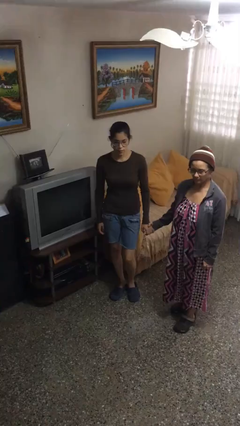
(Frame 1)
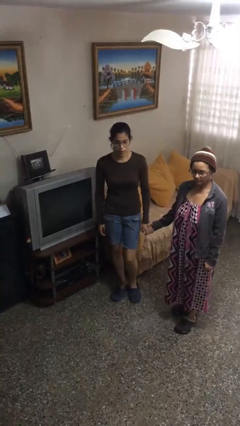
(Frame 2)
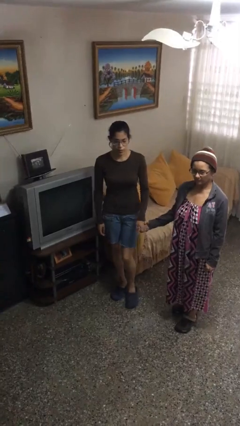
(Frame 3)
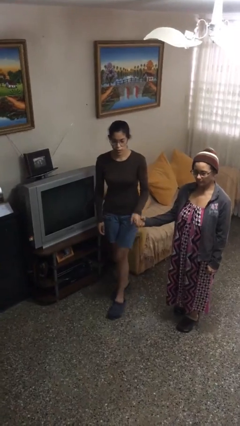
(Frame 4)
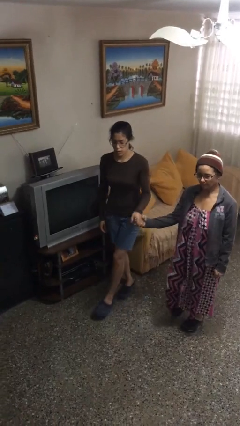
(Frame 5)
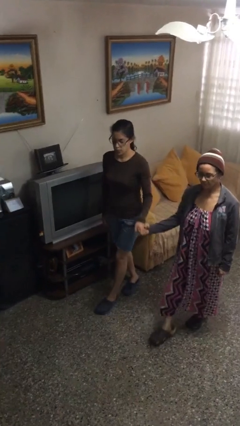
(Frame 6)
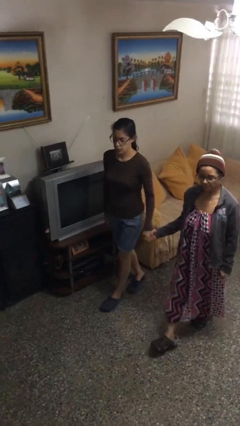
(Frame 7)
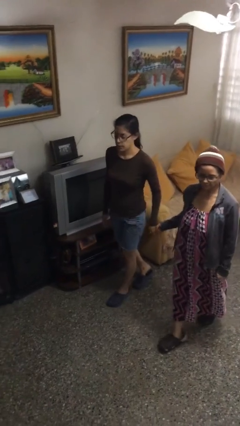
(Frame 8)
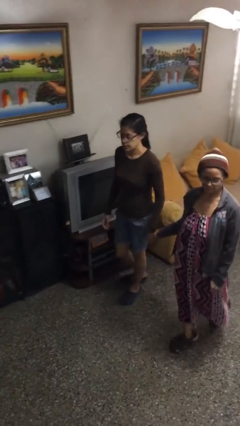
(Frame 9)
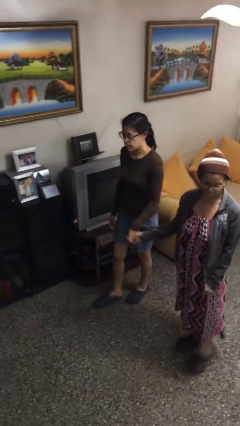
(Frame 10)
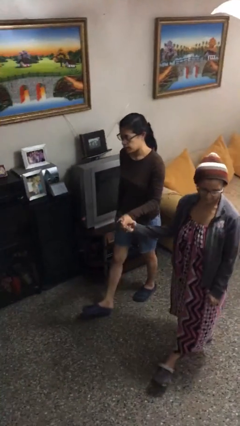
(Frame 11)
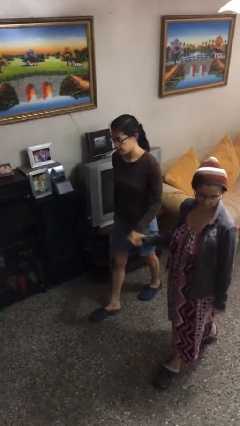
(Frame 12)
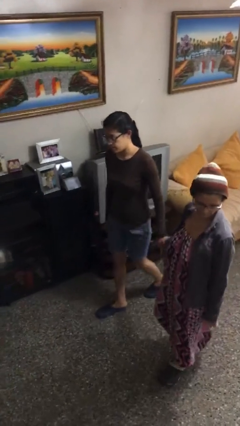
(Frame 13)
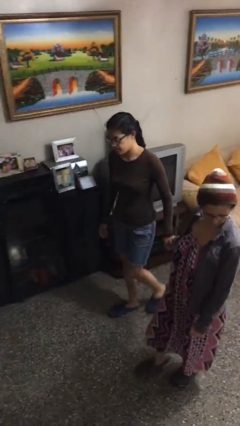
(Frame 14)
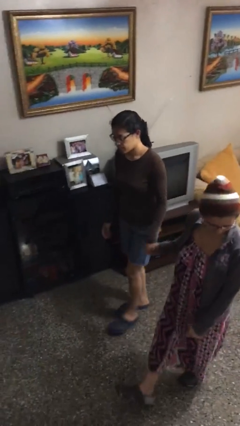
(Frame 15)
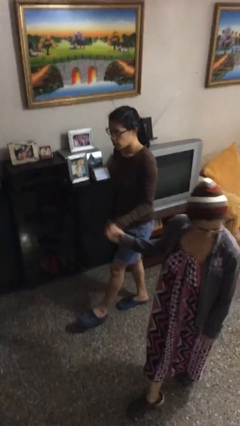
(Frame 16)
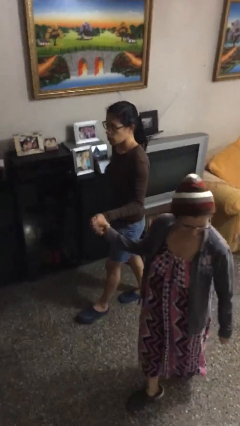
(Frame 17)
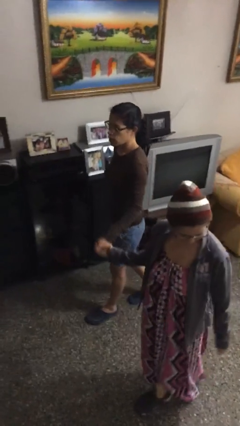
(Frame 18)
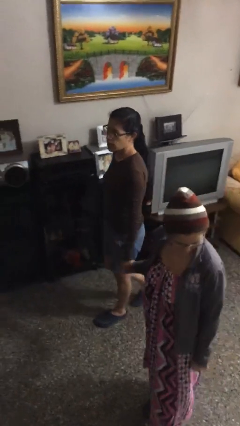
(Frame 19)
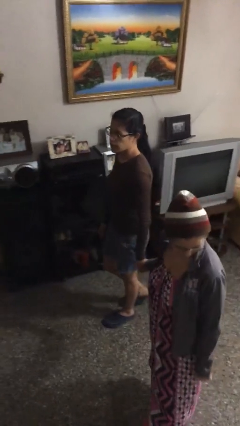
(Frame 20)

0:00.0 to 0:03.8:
person holds hand

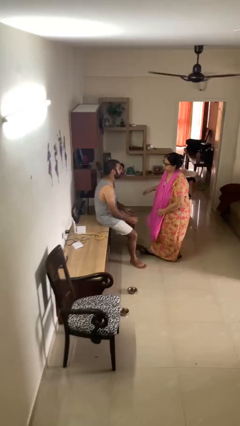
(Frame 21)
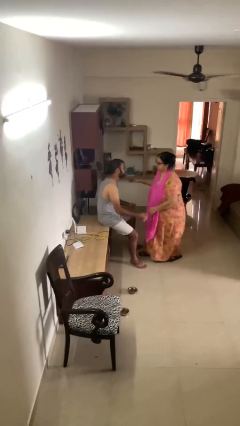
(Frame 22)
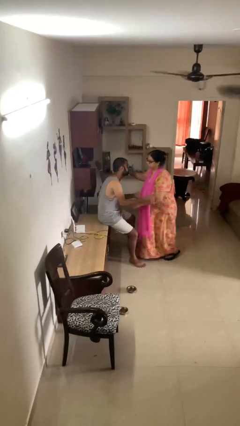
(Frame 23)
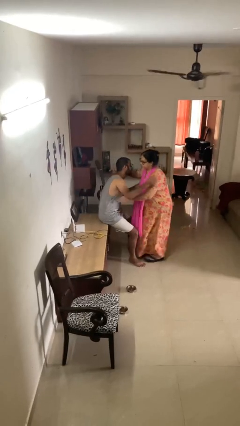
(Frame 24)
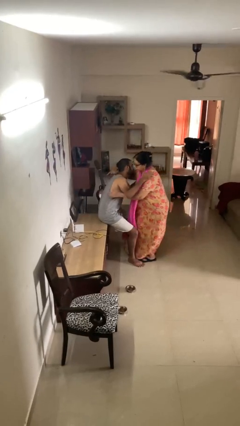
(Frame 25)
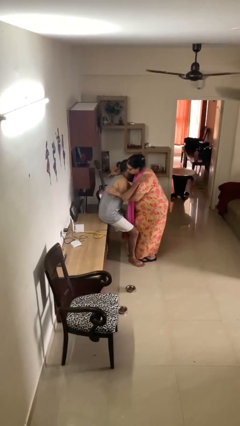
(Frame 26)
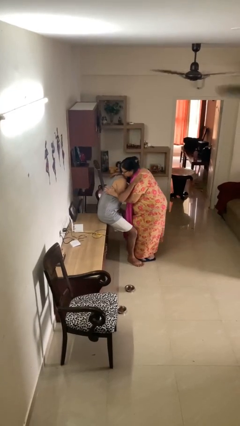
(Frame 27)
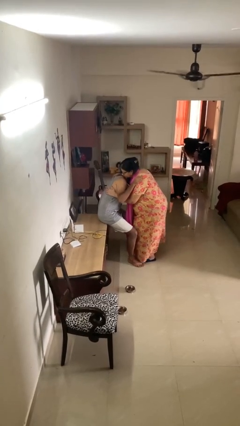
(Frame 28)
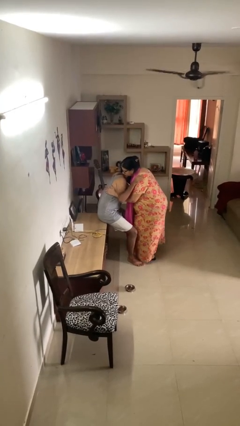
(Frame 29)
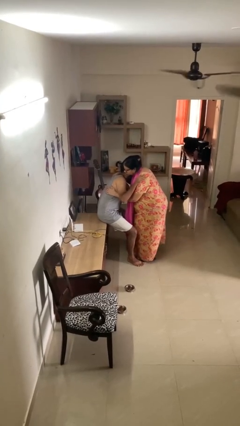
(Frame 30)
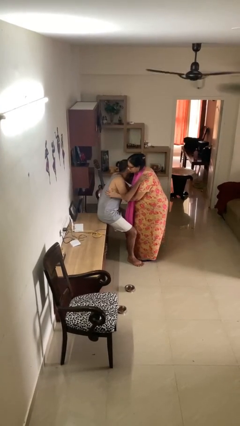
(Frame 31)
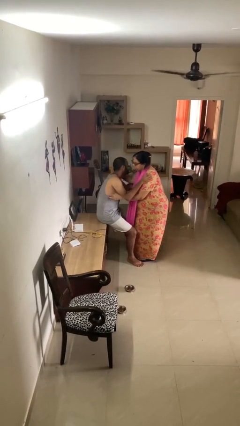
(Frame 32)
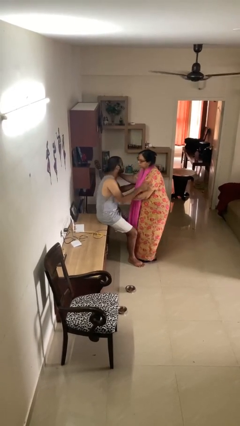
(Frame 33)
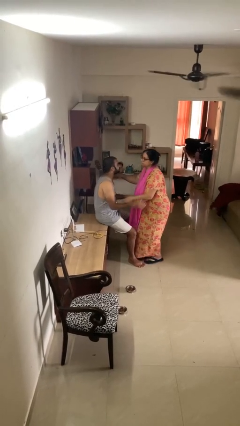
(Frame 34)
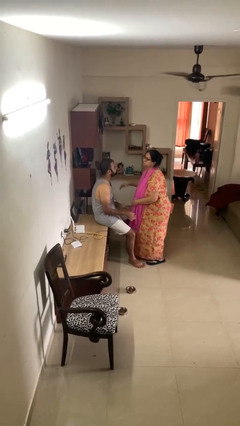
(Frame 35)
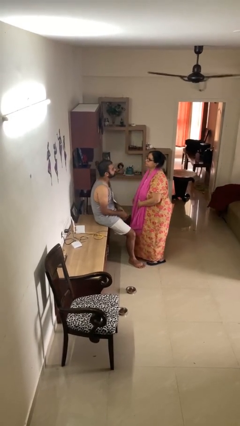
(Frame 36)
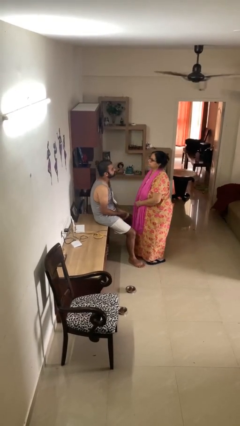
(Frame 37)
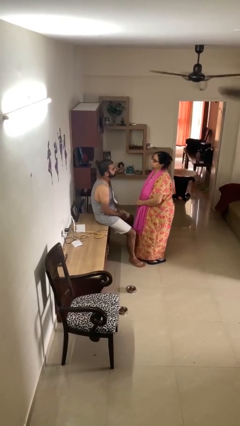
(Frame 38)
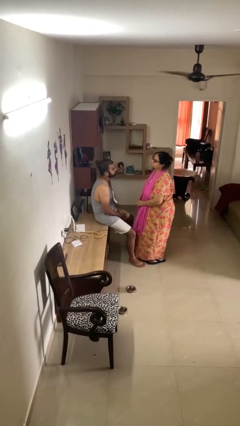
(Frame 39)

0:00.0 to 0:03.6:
person embraces person

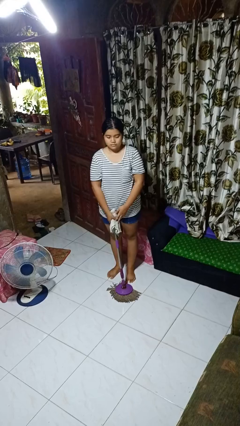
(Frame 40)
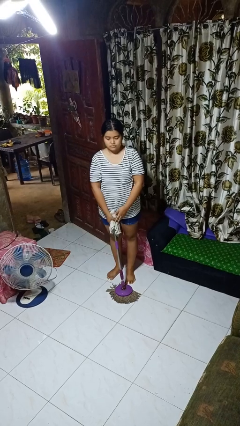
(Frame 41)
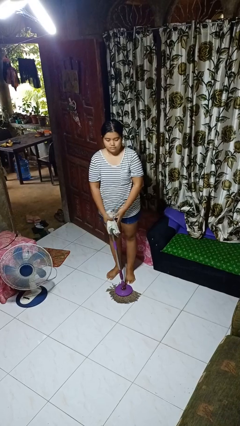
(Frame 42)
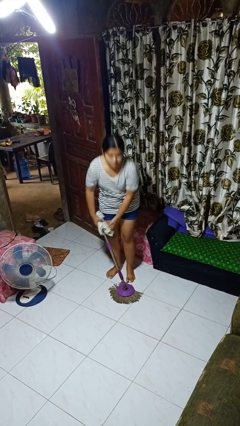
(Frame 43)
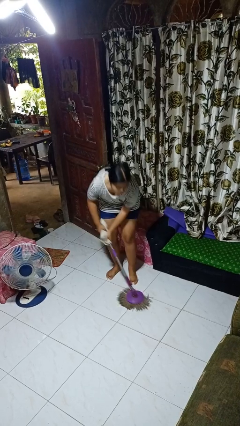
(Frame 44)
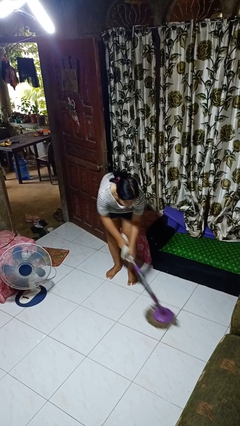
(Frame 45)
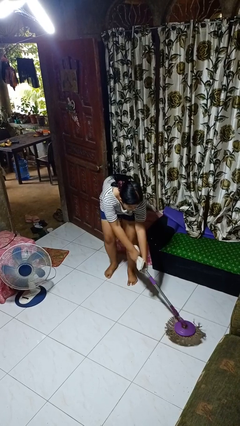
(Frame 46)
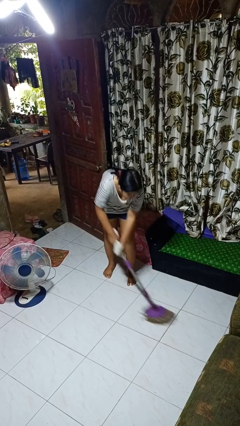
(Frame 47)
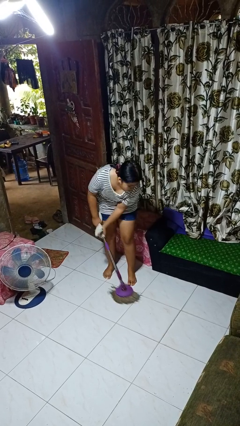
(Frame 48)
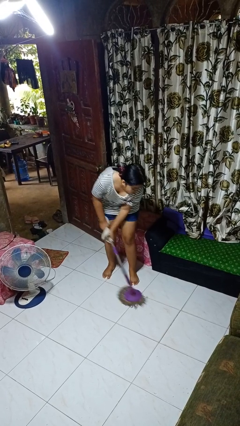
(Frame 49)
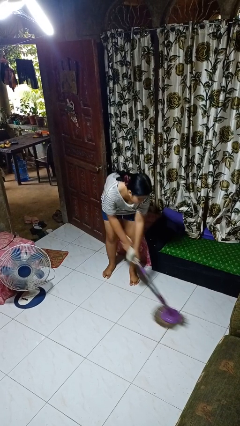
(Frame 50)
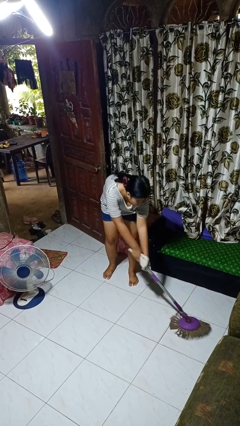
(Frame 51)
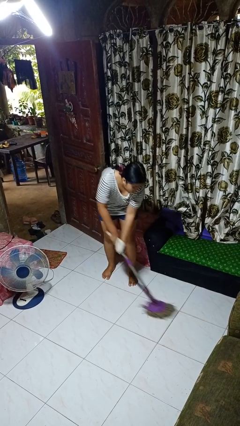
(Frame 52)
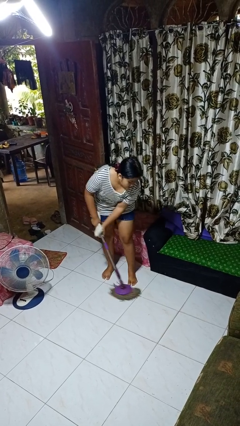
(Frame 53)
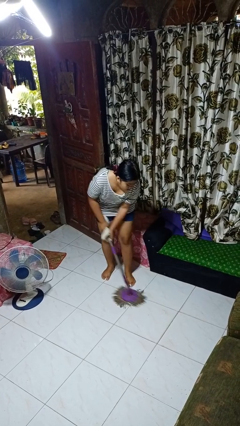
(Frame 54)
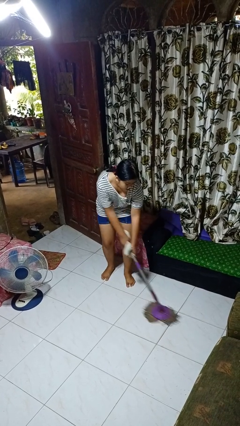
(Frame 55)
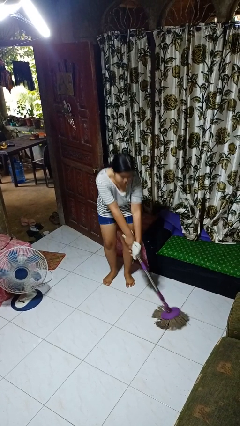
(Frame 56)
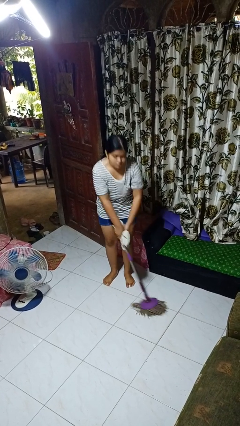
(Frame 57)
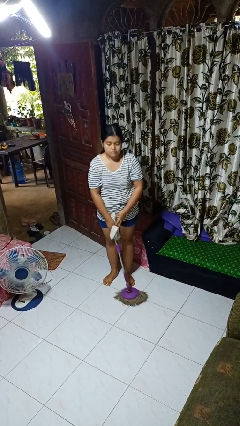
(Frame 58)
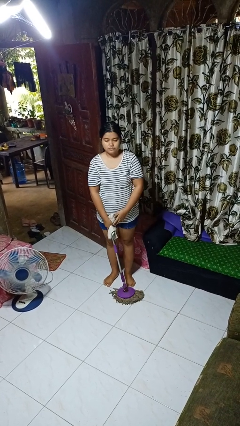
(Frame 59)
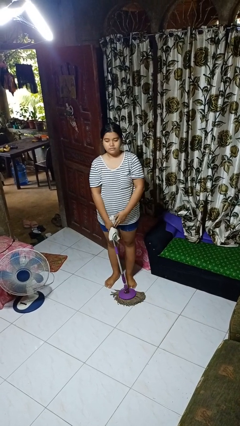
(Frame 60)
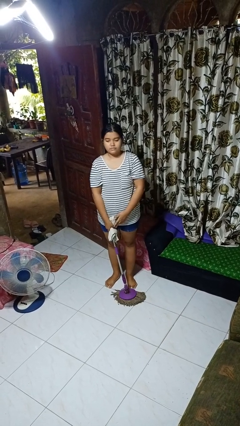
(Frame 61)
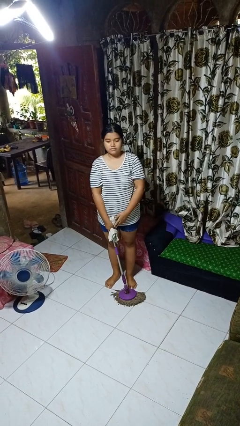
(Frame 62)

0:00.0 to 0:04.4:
person mops

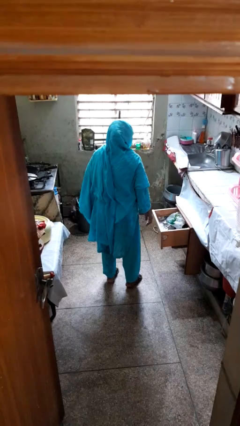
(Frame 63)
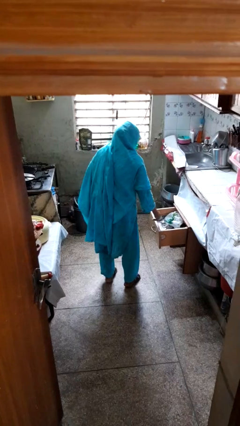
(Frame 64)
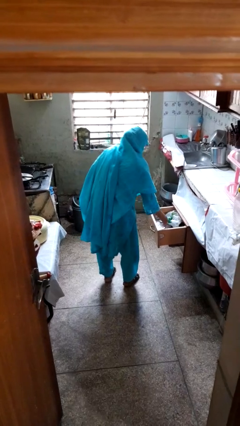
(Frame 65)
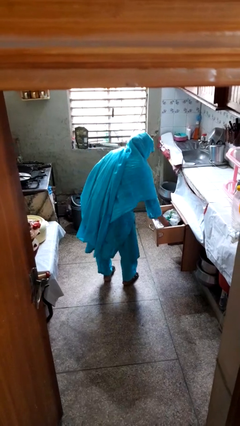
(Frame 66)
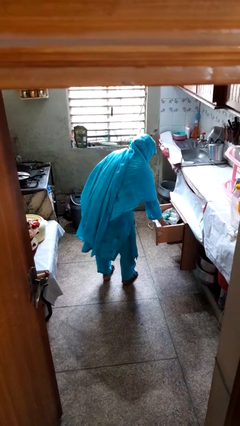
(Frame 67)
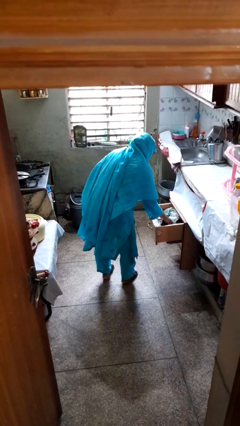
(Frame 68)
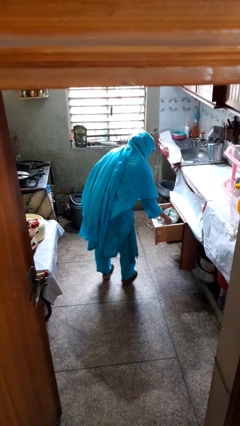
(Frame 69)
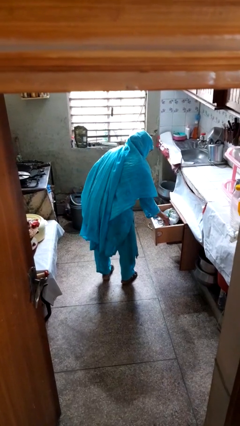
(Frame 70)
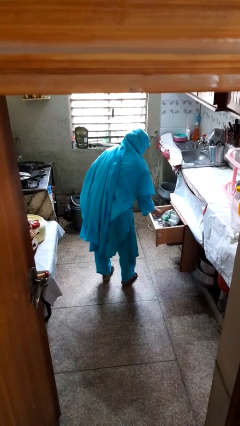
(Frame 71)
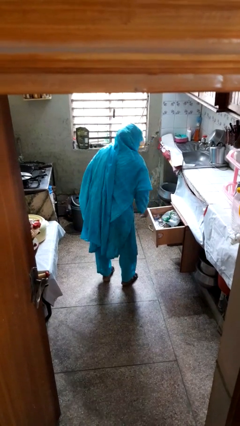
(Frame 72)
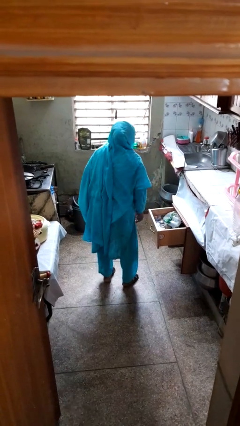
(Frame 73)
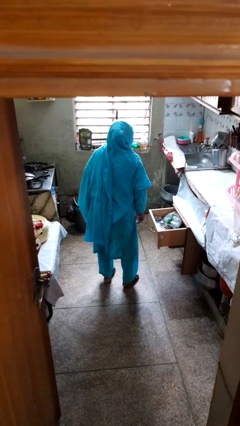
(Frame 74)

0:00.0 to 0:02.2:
person searches in kitchen drawer

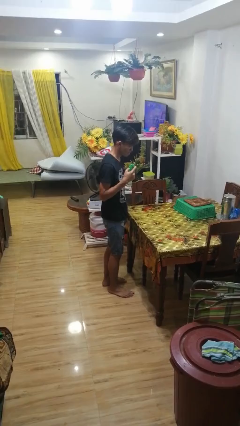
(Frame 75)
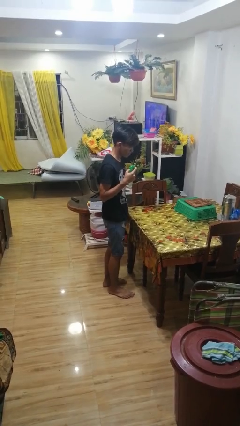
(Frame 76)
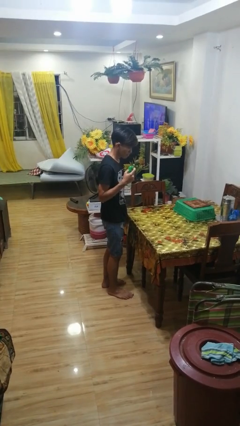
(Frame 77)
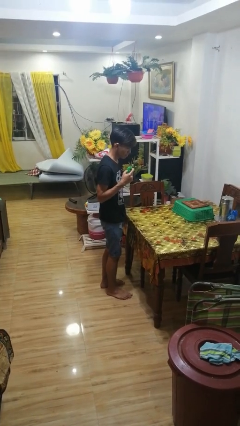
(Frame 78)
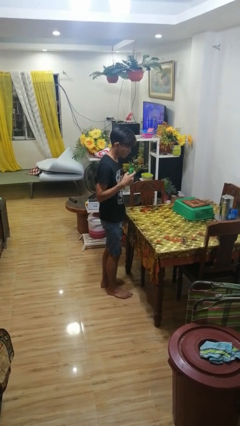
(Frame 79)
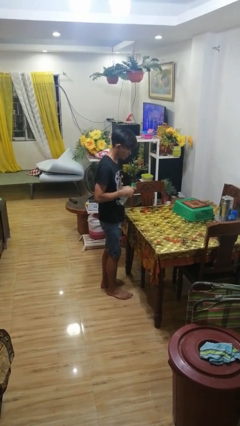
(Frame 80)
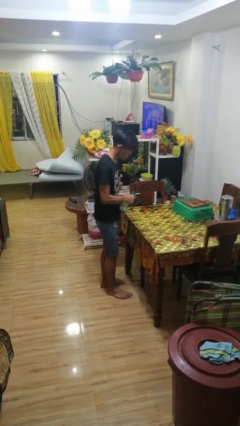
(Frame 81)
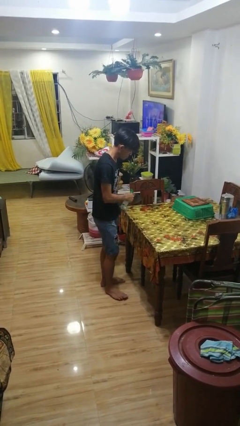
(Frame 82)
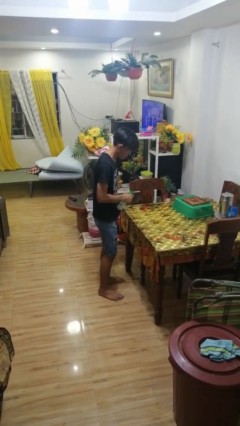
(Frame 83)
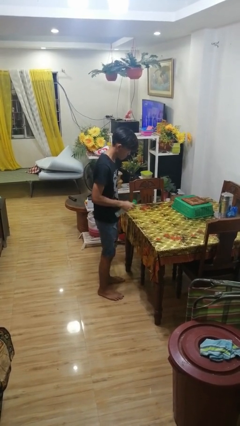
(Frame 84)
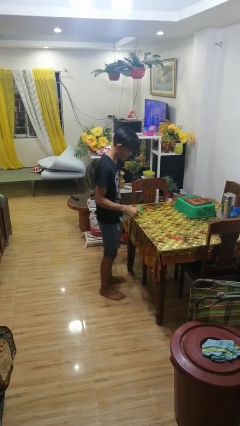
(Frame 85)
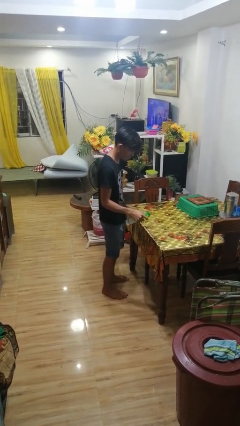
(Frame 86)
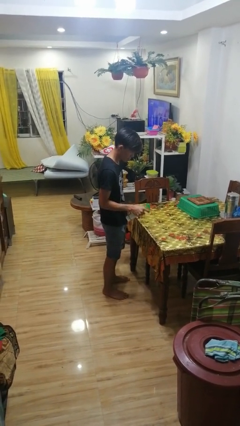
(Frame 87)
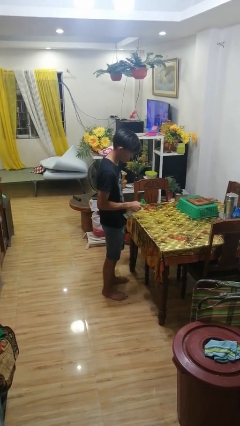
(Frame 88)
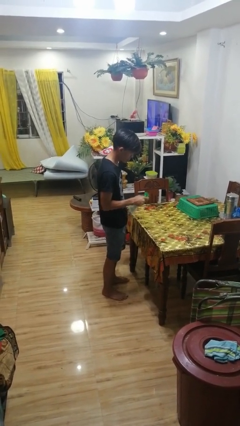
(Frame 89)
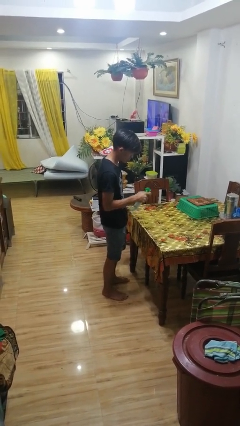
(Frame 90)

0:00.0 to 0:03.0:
person sprays from bottle

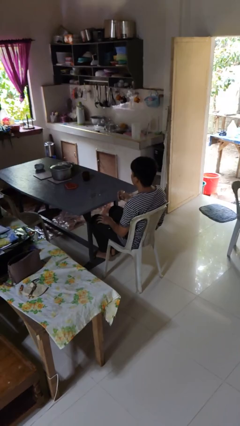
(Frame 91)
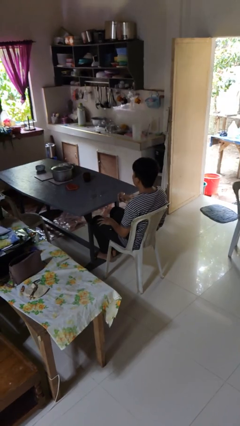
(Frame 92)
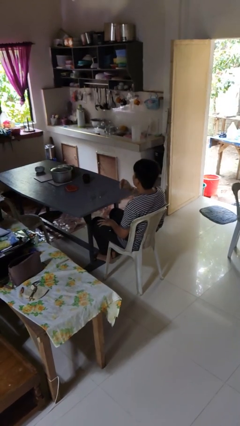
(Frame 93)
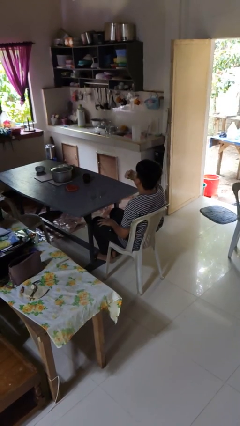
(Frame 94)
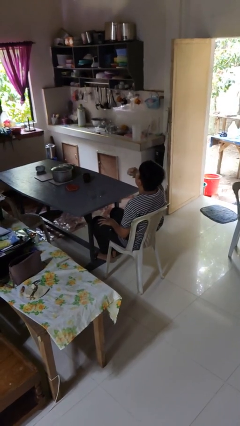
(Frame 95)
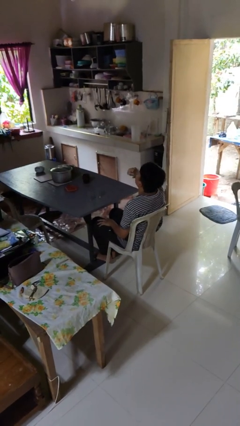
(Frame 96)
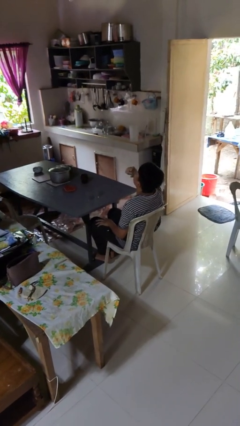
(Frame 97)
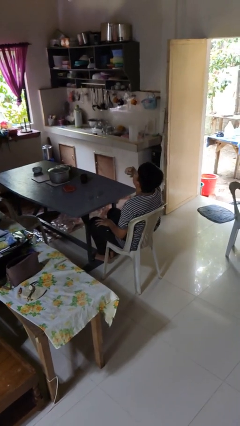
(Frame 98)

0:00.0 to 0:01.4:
person drinks from shotglass
